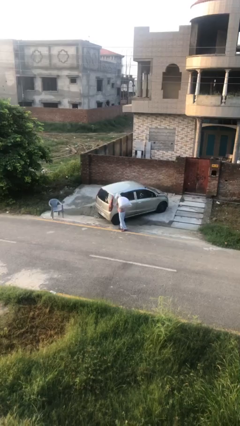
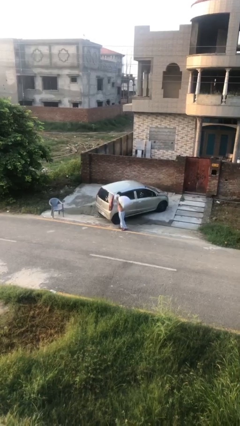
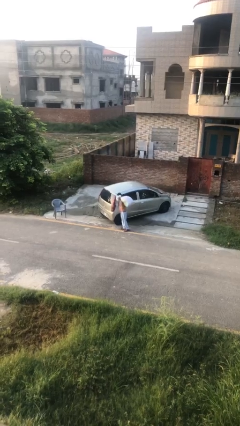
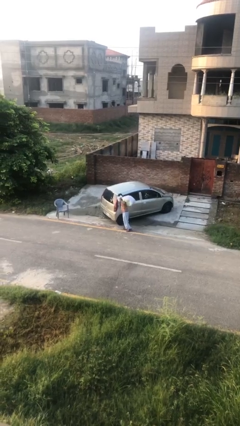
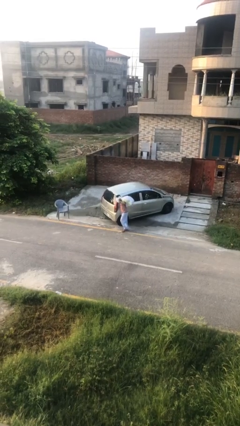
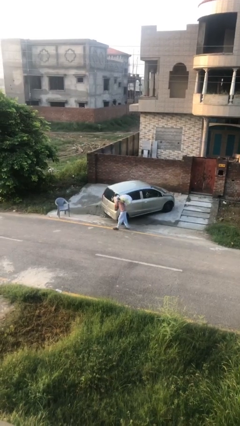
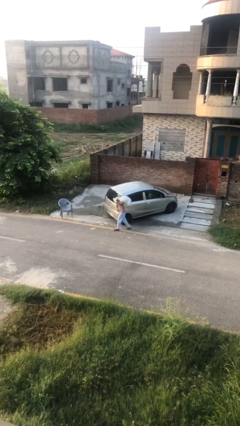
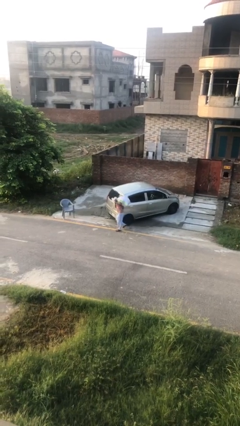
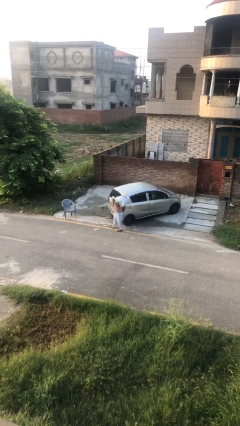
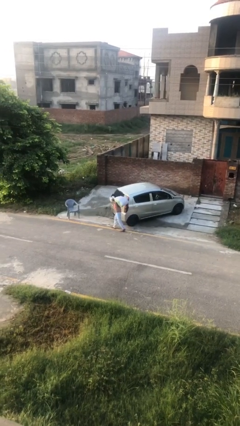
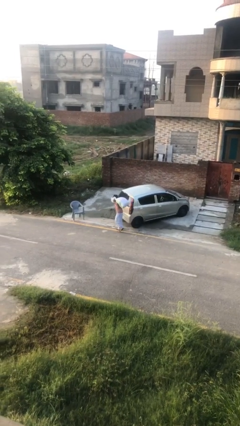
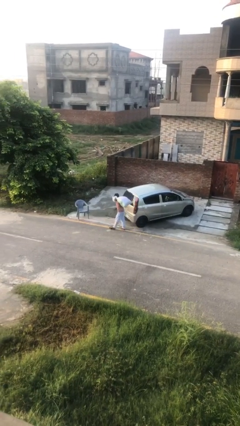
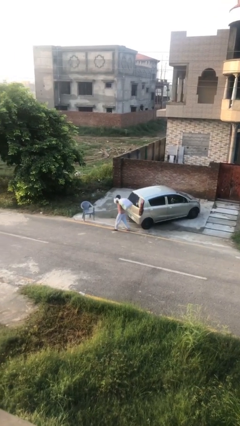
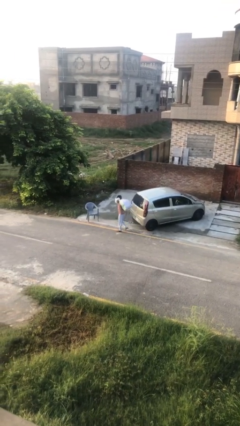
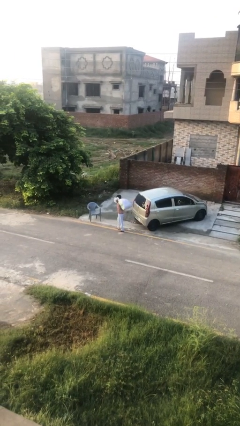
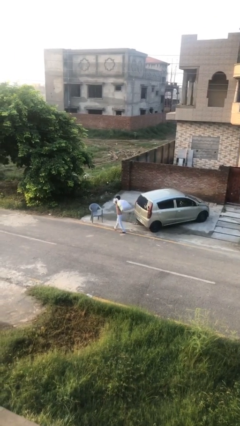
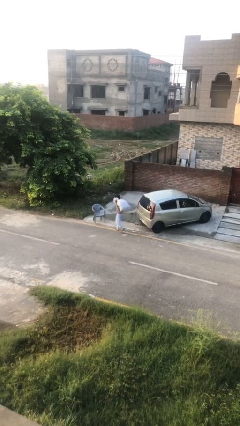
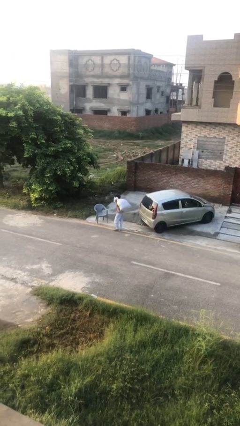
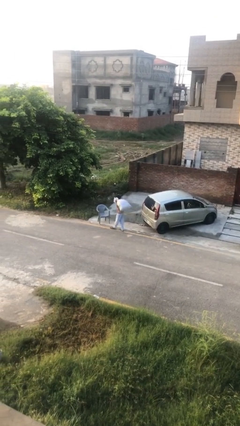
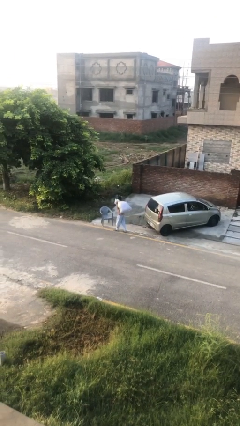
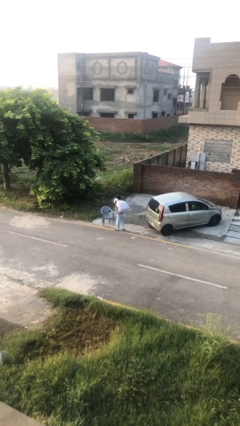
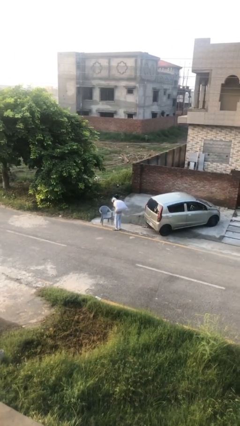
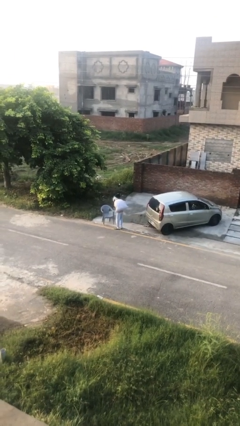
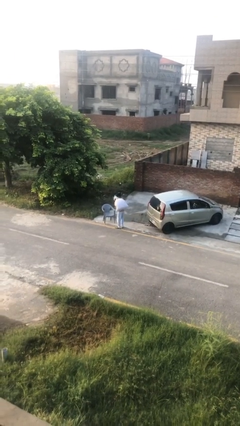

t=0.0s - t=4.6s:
person carries heavy object

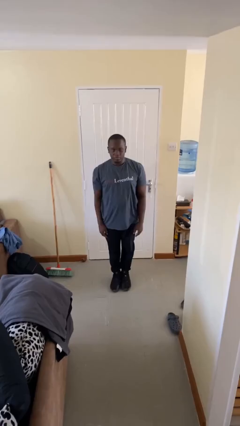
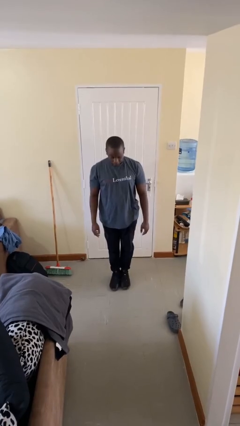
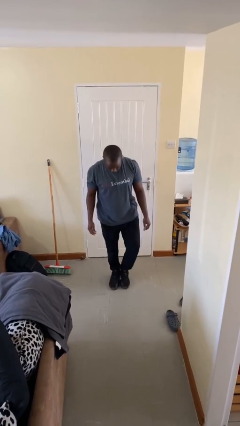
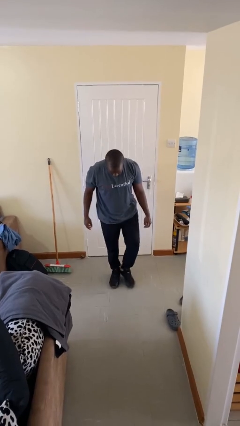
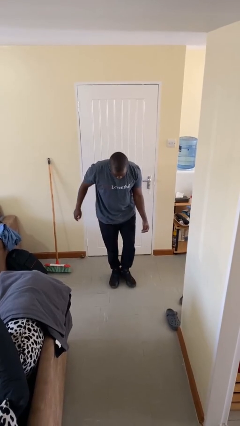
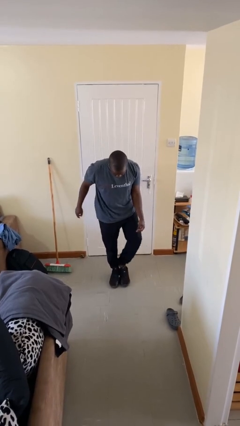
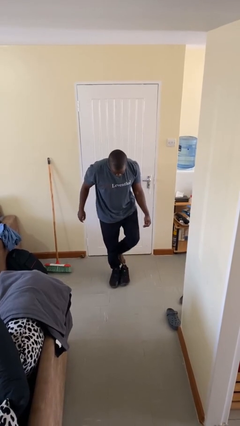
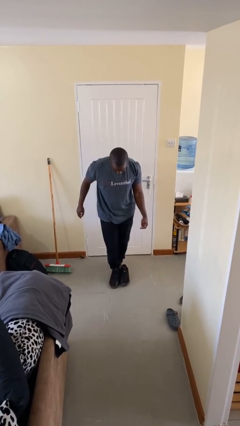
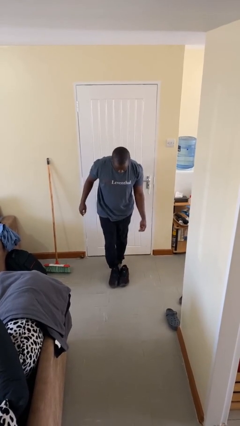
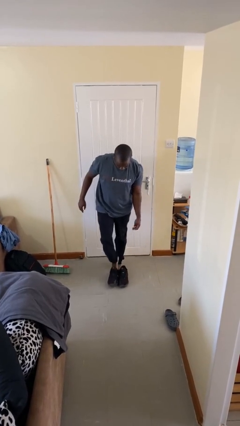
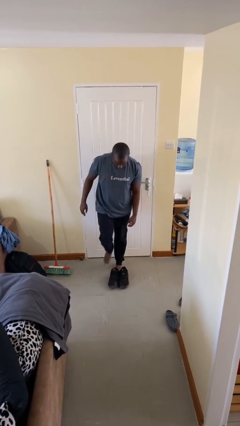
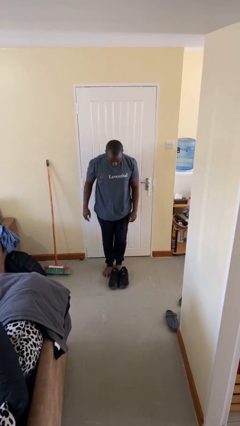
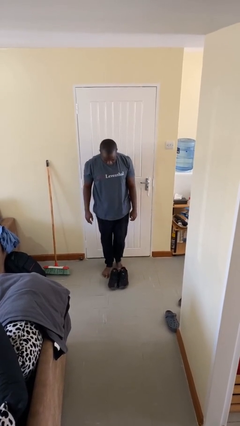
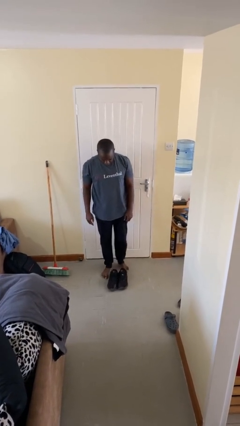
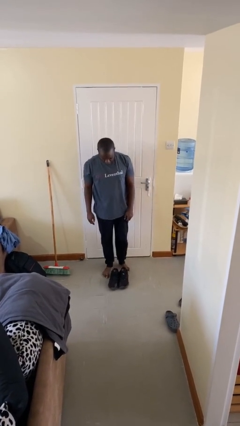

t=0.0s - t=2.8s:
person takes off shoes

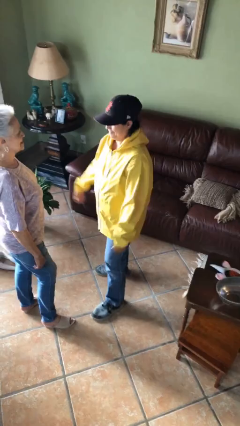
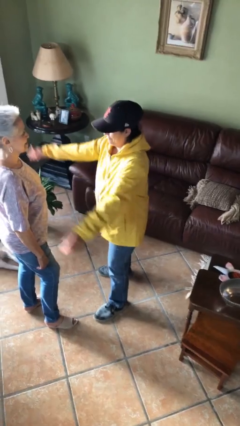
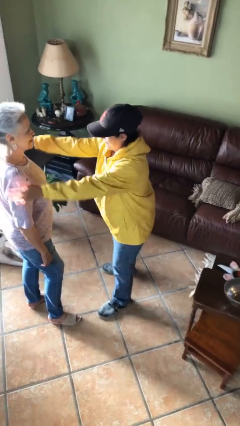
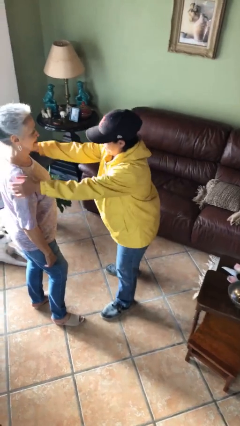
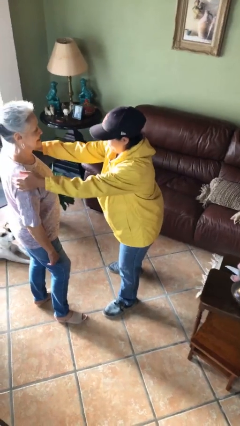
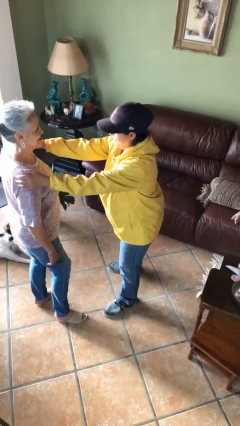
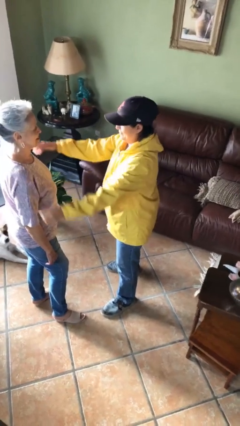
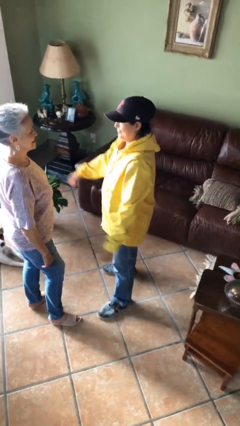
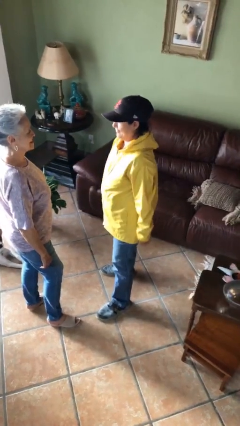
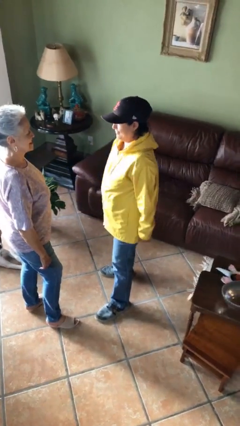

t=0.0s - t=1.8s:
person pounds shoulders of person

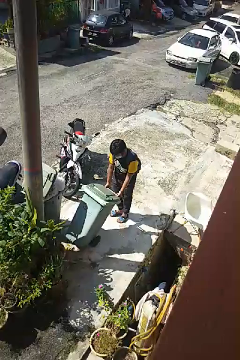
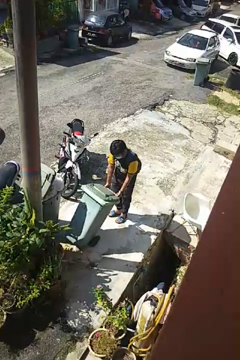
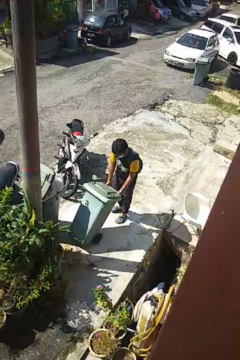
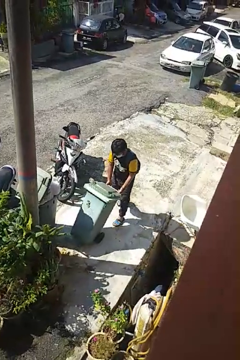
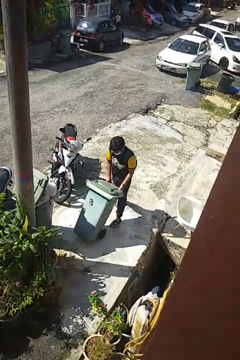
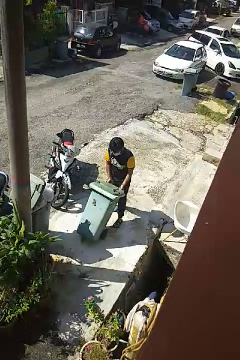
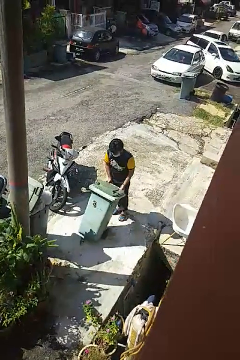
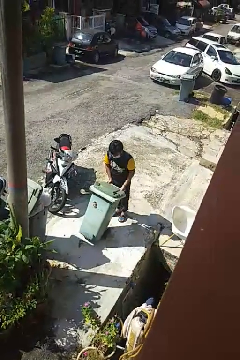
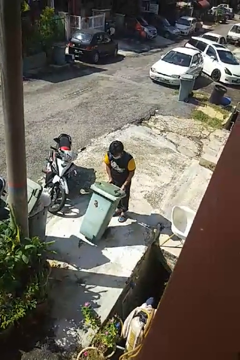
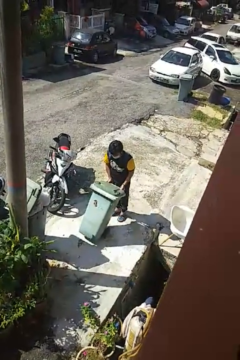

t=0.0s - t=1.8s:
person pulls wheeled trashcan

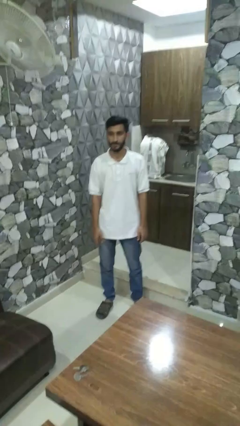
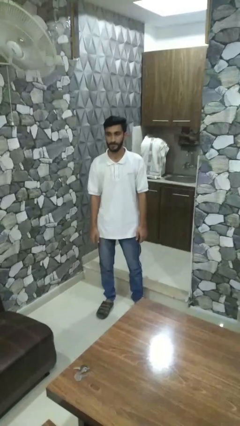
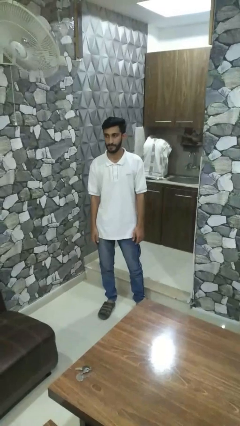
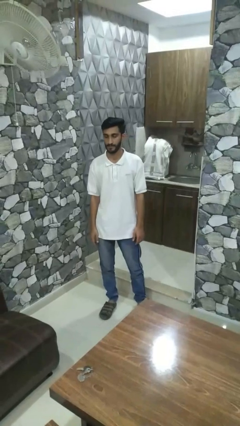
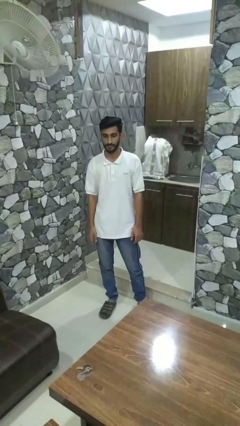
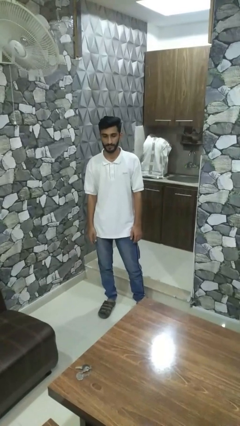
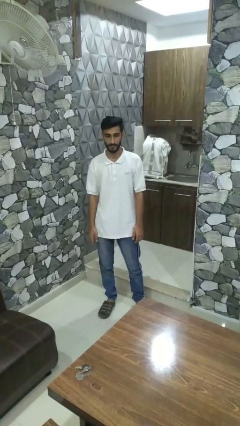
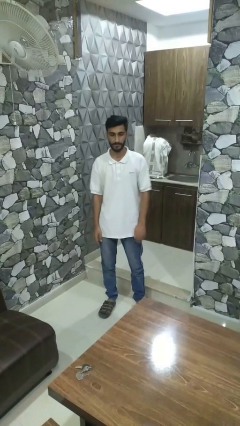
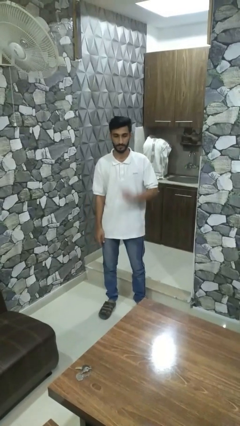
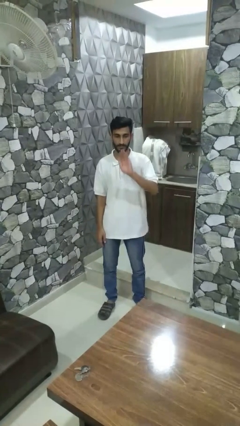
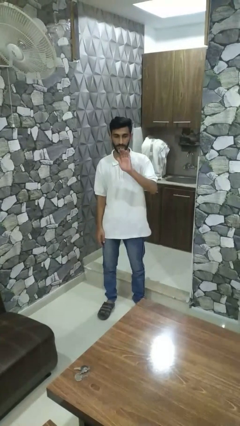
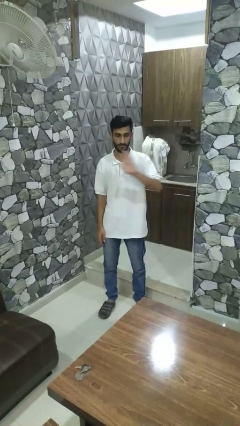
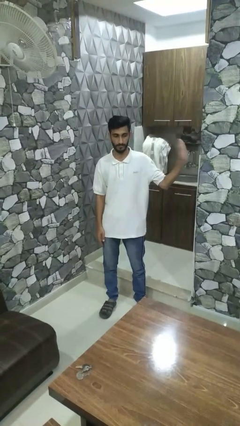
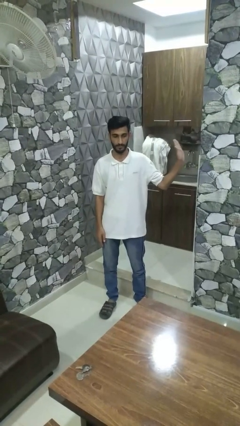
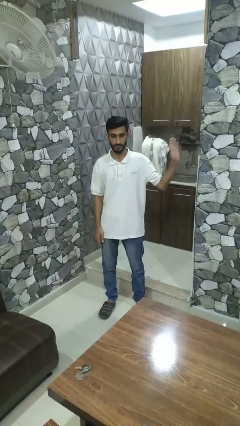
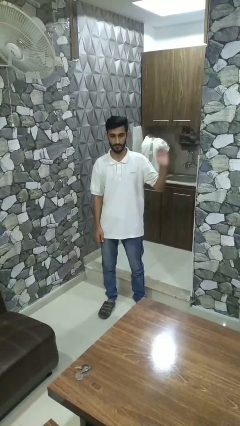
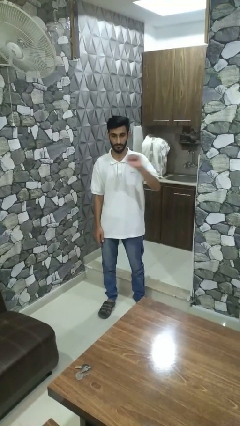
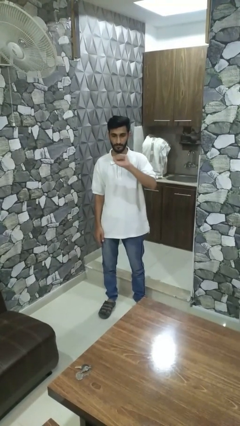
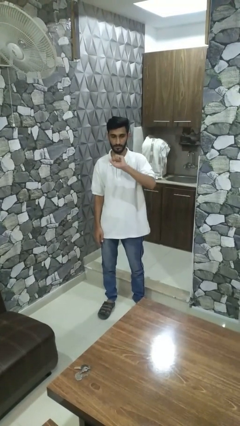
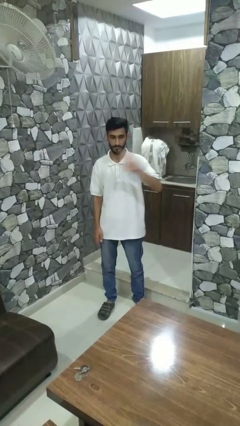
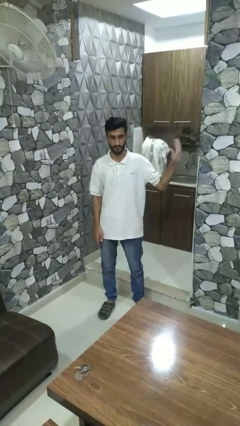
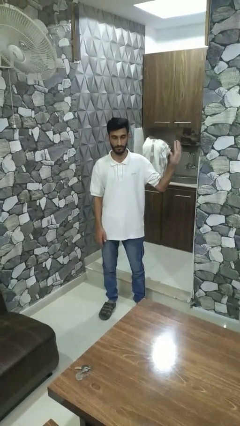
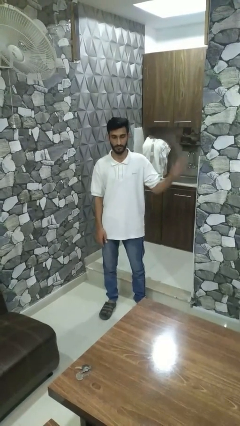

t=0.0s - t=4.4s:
person gestures swipe left

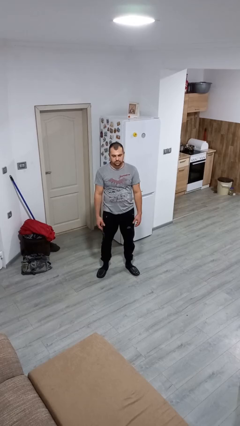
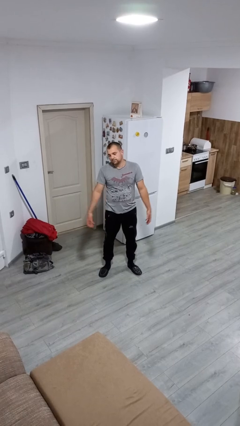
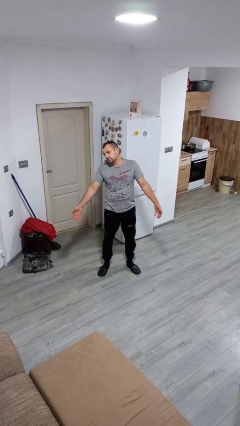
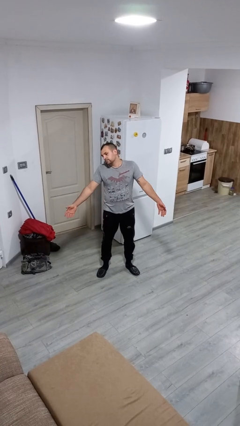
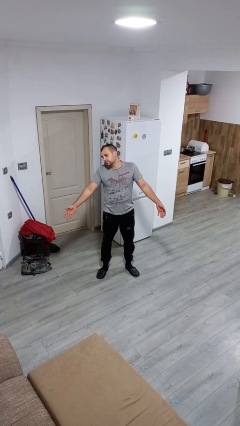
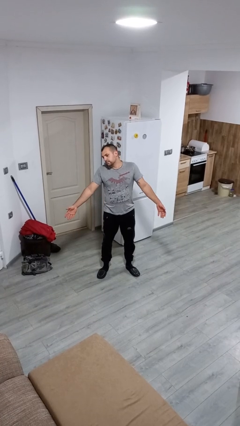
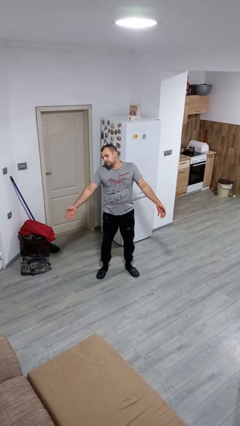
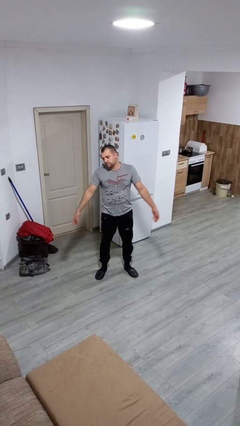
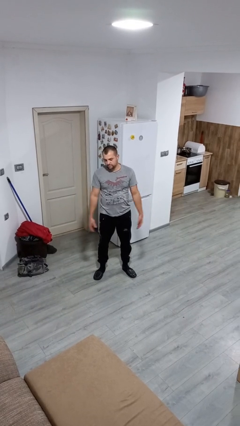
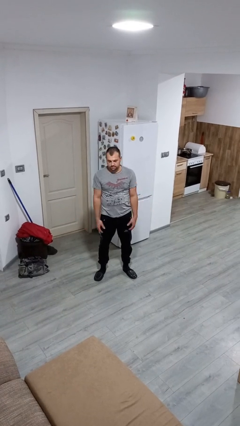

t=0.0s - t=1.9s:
person shrugs
